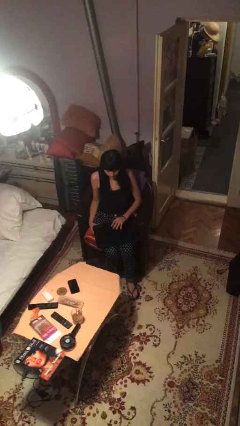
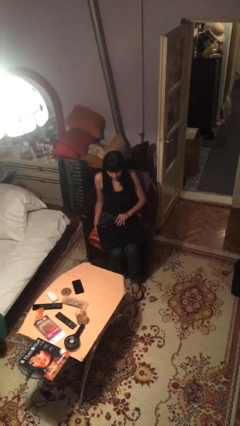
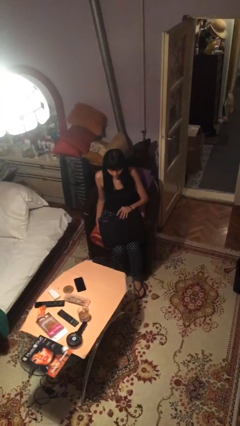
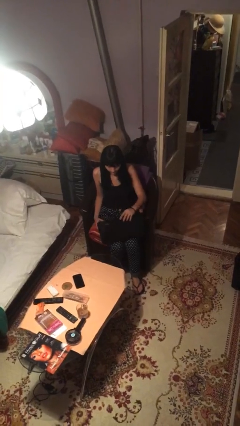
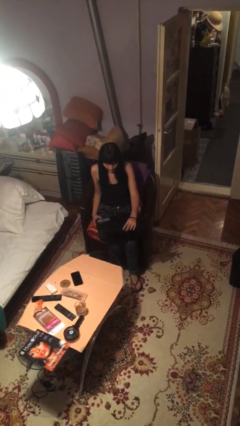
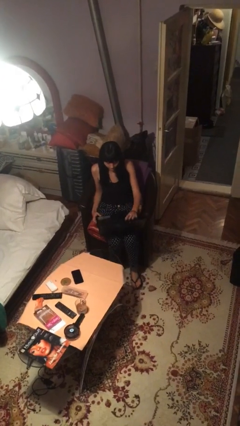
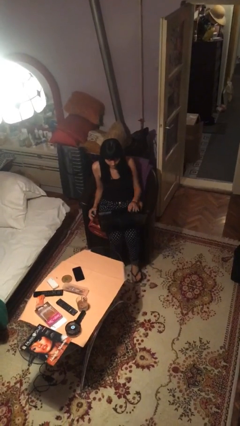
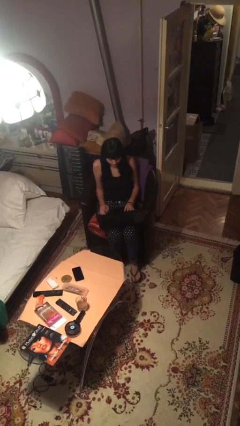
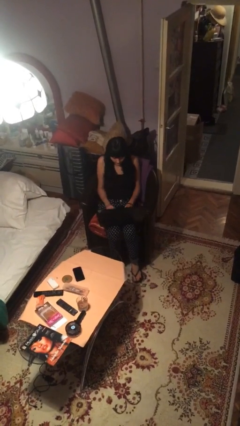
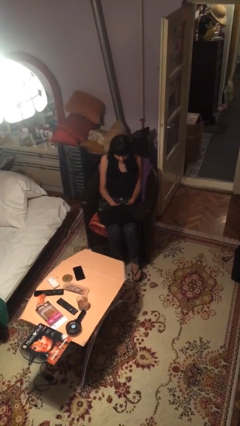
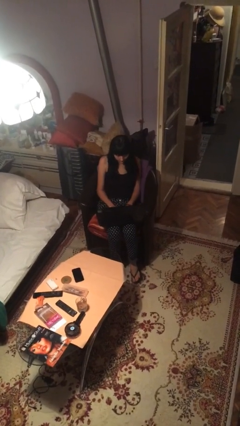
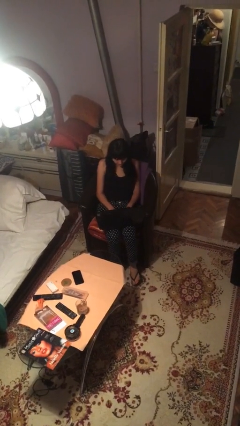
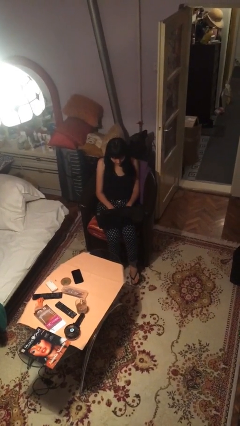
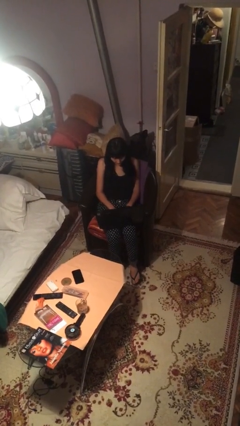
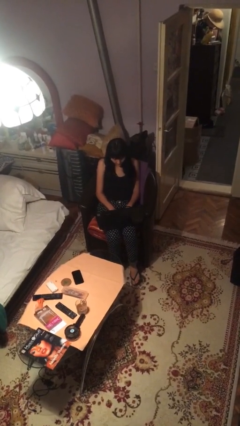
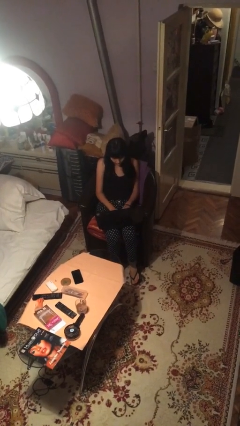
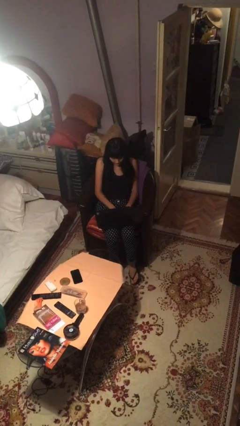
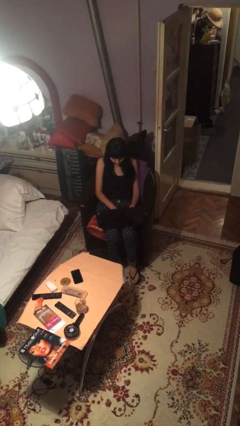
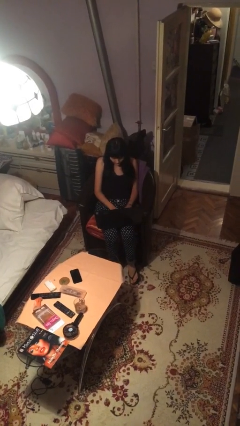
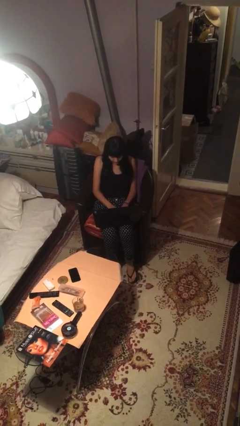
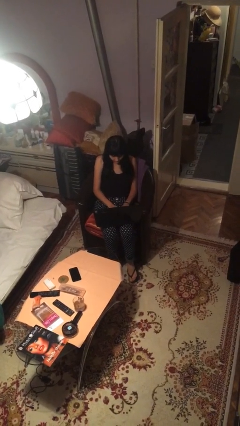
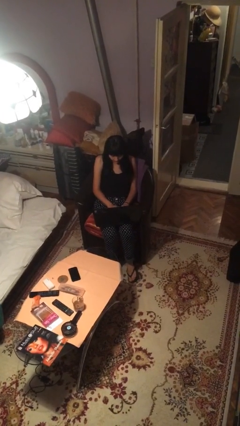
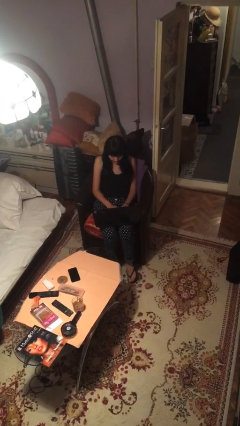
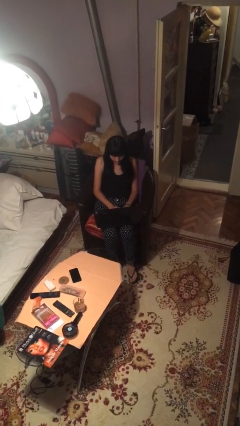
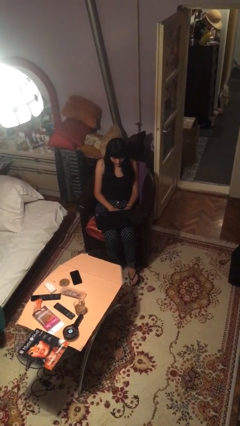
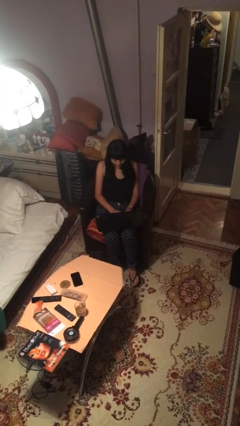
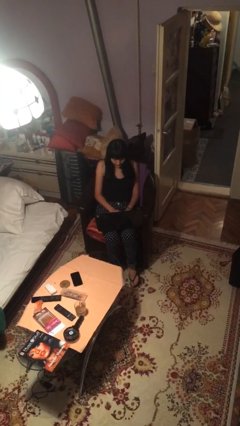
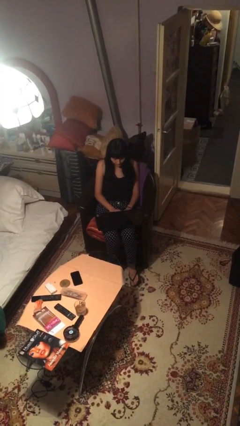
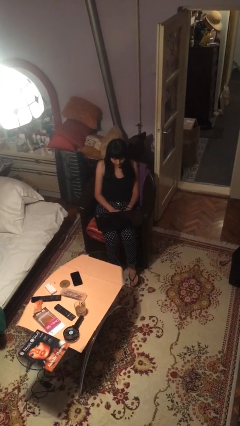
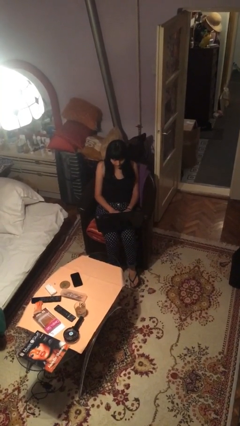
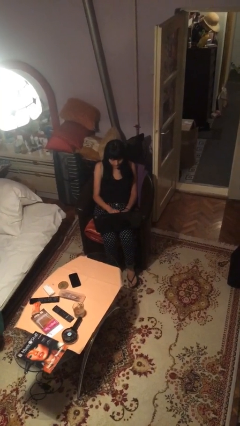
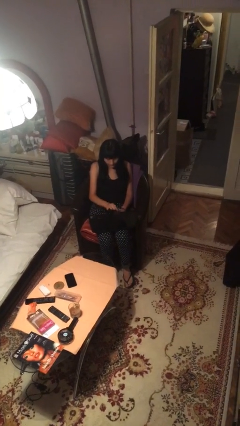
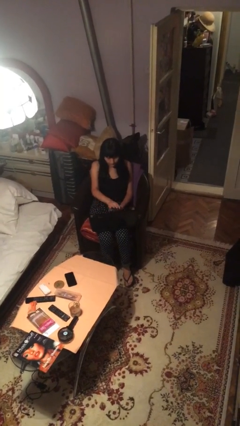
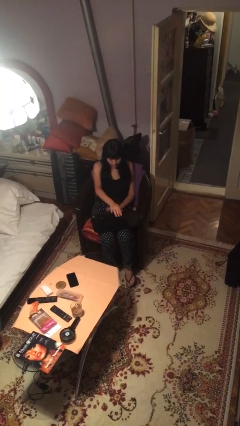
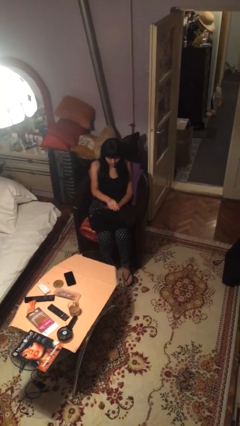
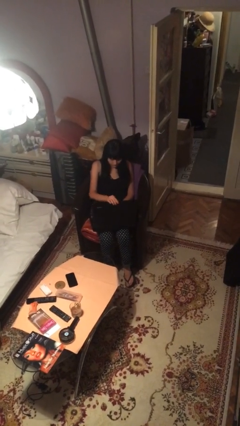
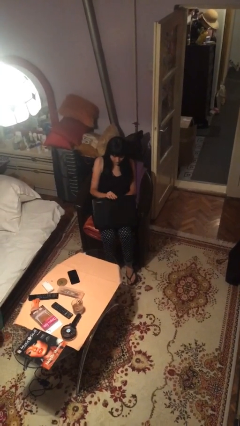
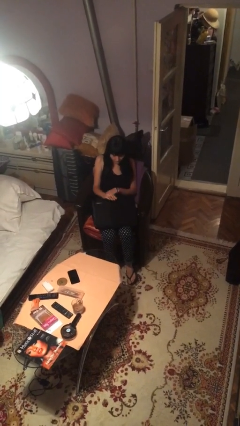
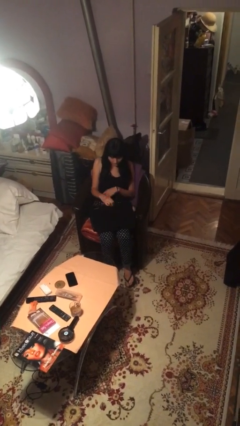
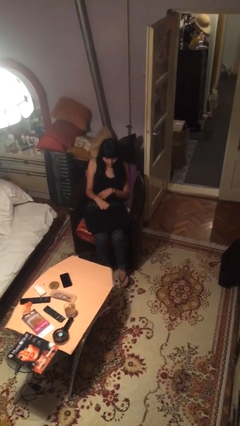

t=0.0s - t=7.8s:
person interacts with laptop

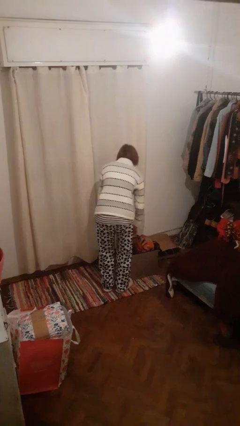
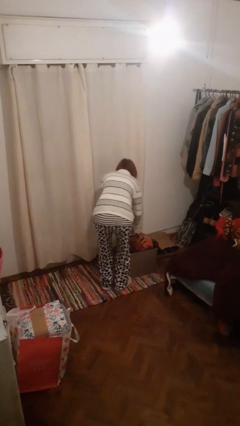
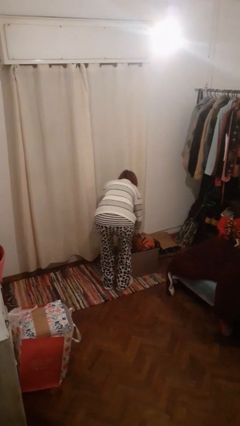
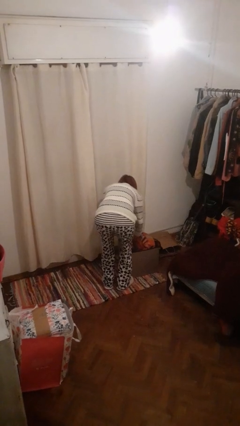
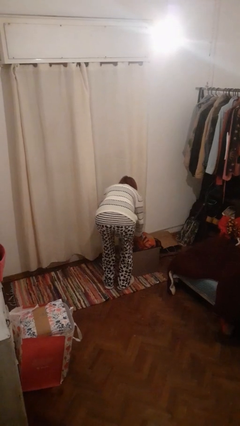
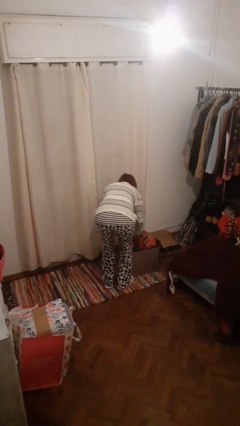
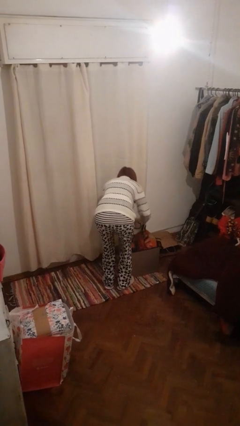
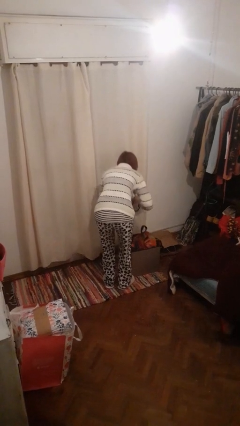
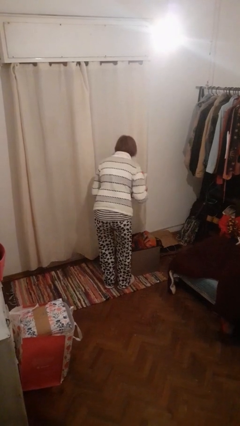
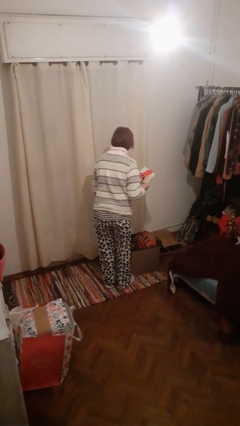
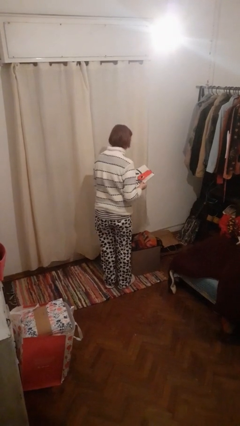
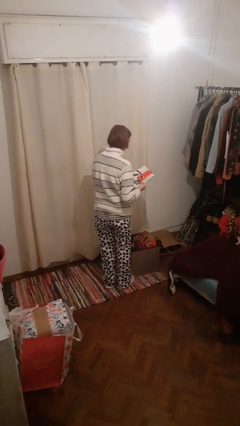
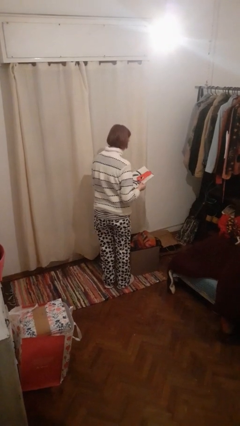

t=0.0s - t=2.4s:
person takes object from basket

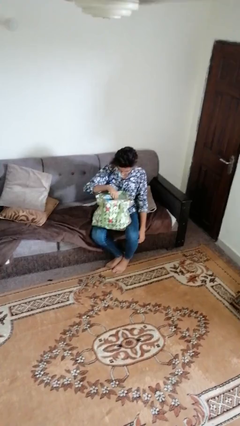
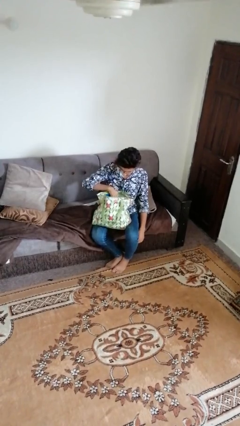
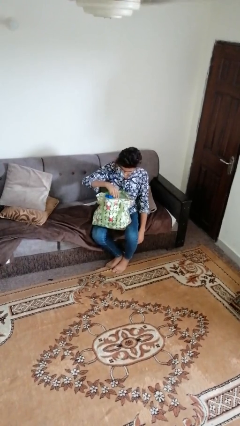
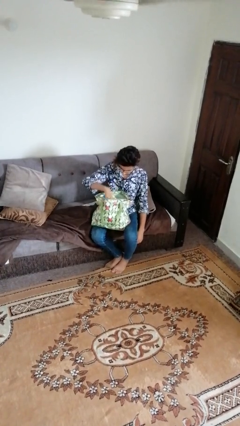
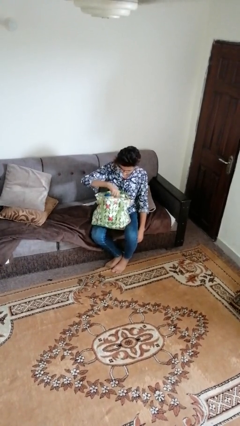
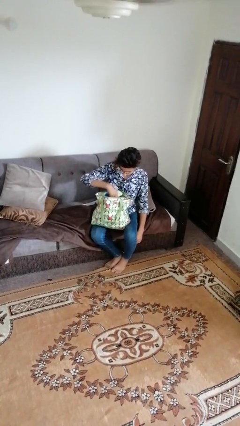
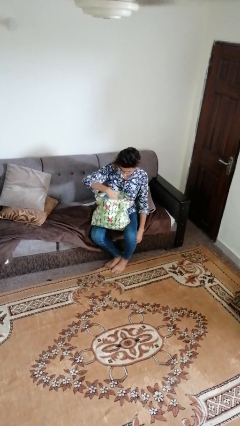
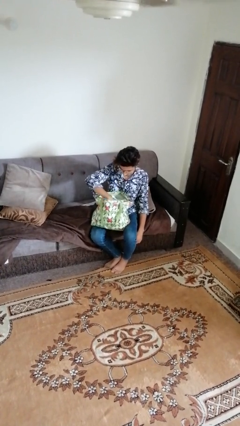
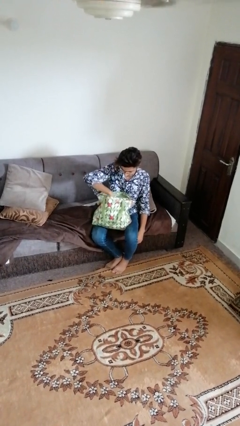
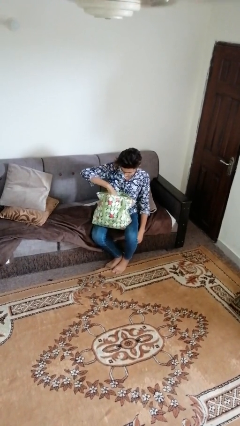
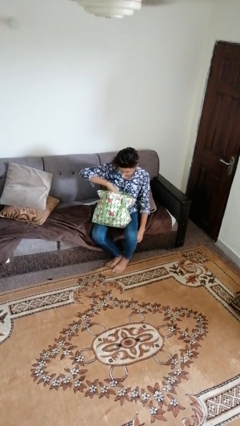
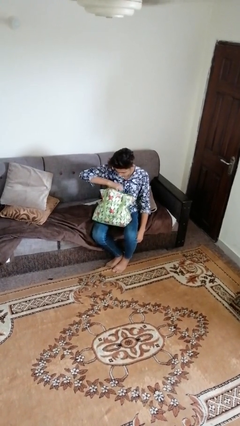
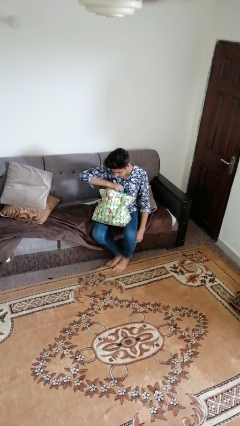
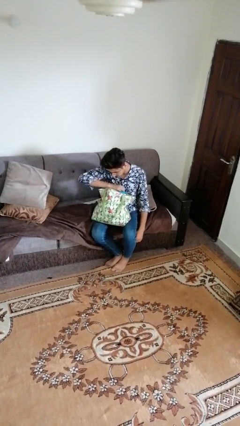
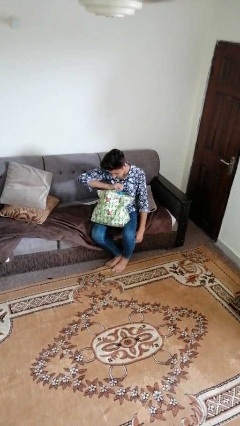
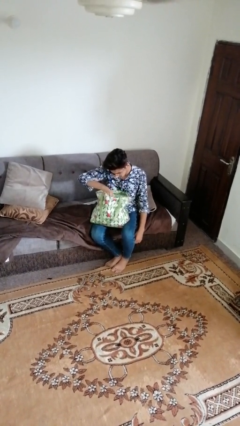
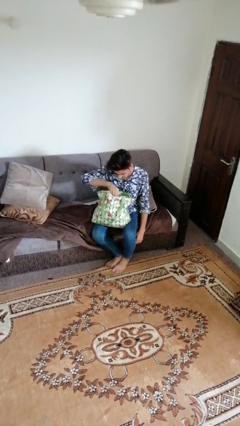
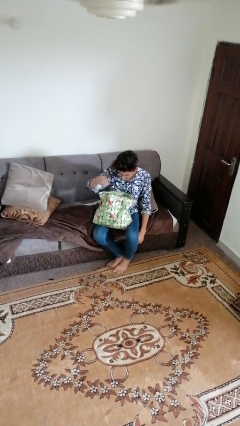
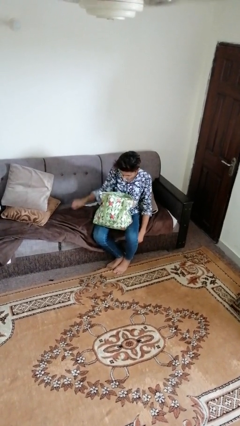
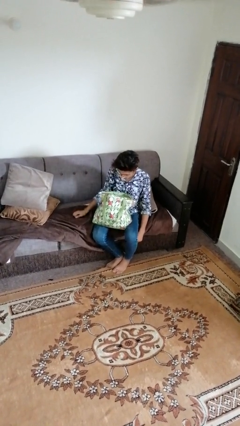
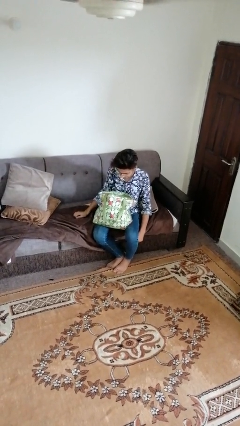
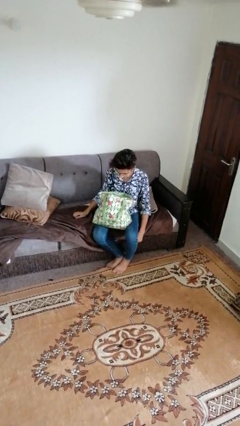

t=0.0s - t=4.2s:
person searches in bag

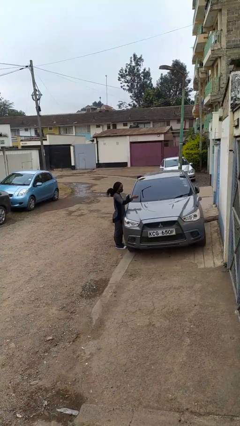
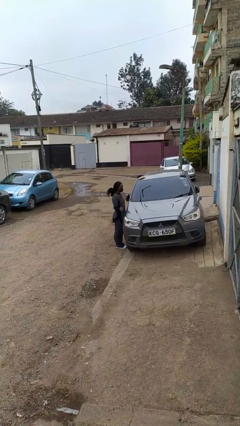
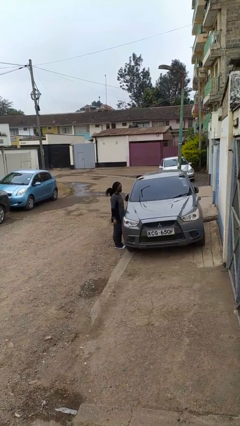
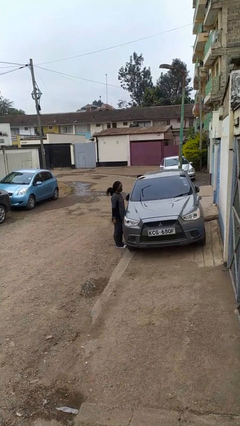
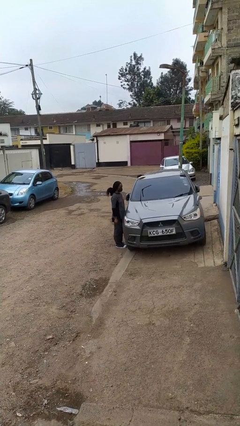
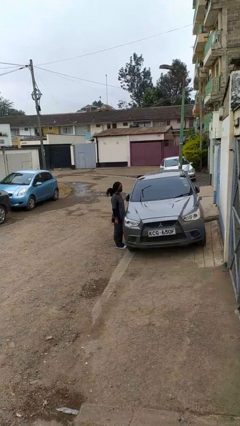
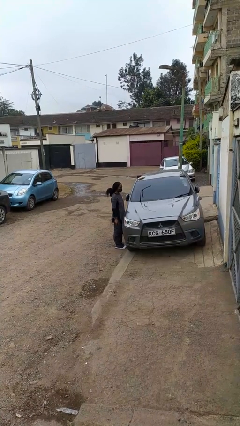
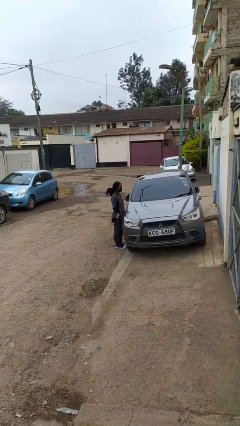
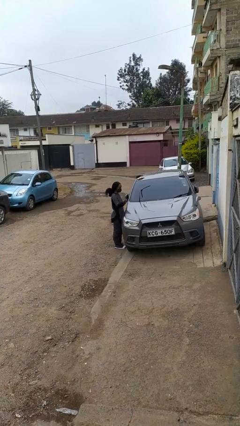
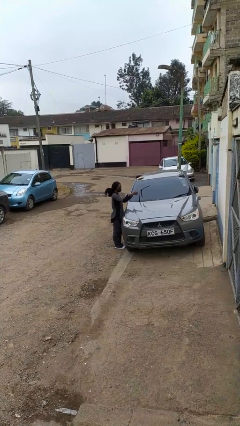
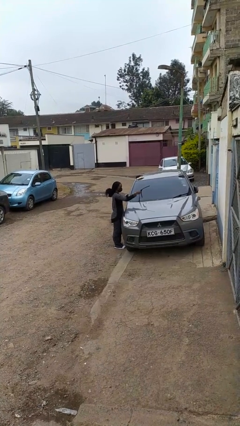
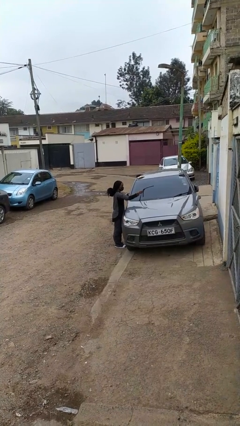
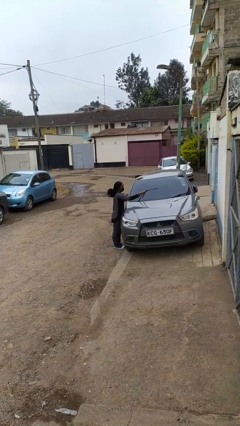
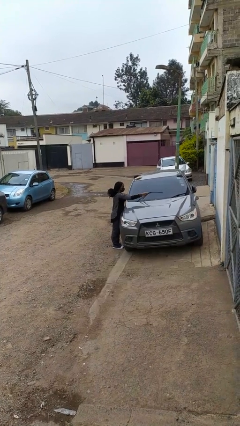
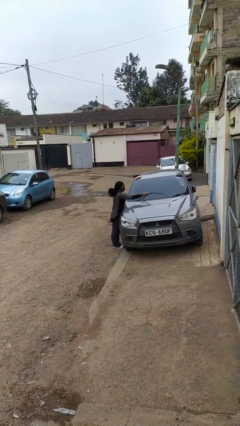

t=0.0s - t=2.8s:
person puts down object on couch

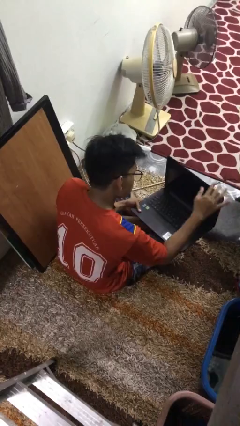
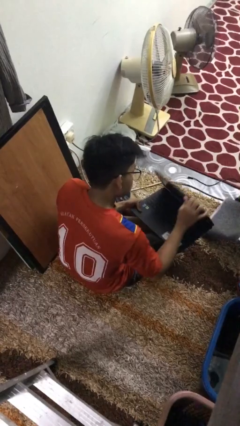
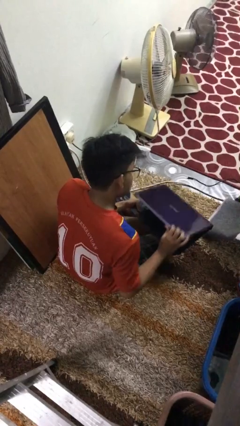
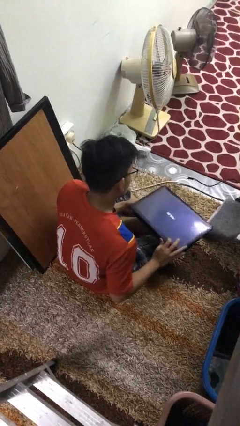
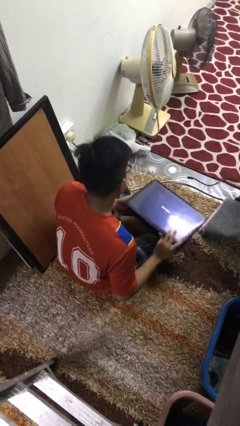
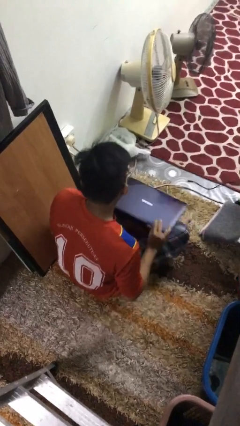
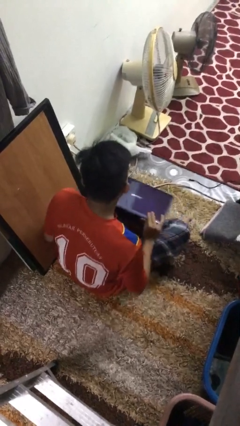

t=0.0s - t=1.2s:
person closes laptop
